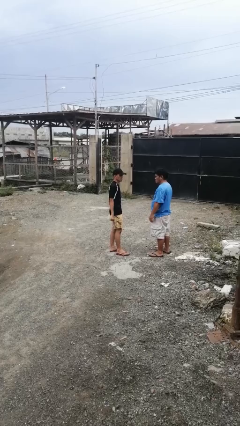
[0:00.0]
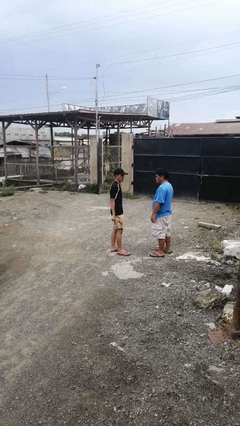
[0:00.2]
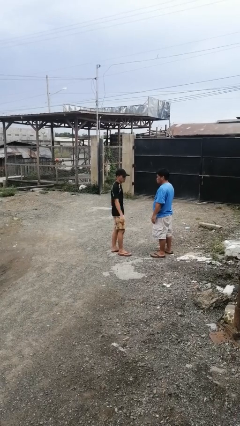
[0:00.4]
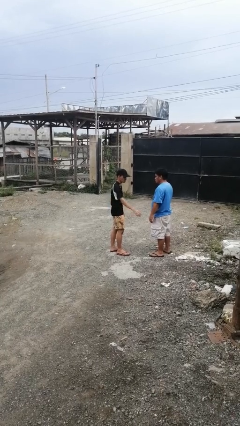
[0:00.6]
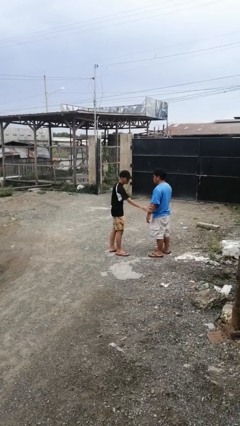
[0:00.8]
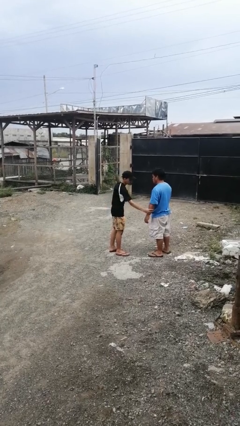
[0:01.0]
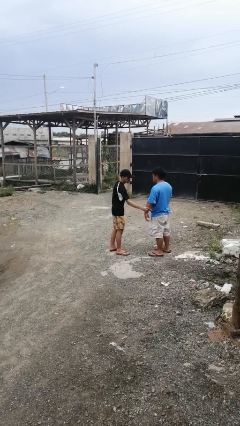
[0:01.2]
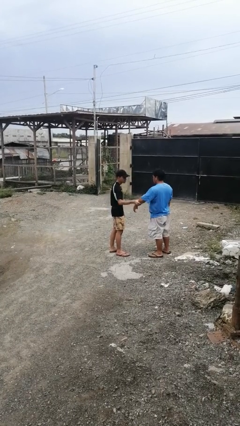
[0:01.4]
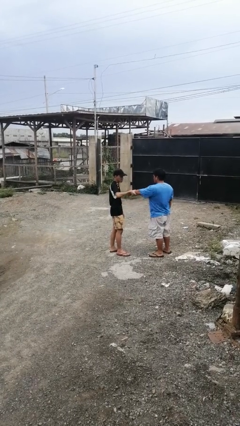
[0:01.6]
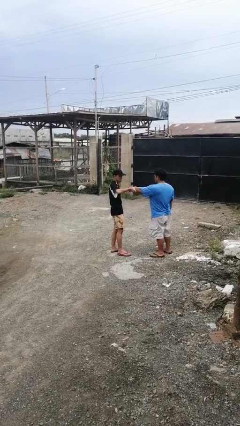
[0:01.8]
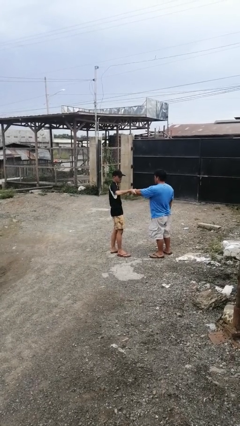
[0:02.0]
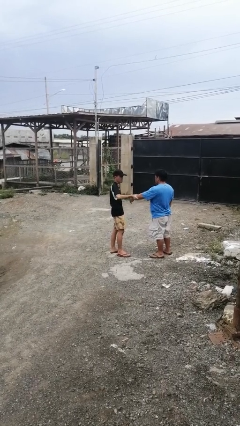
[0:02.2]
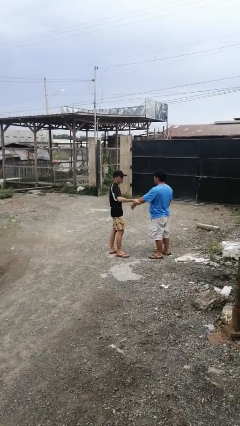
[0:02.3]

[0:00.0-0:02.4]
person grabs person by forearm

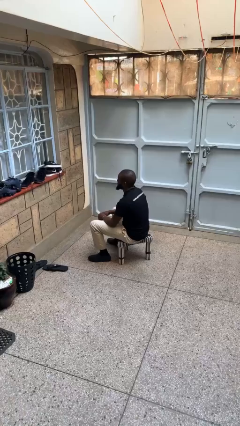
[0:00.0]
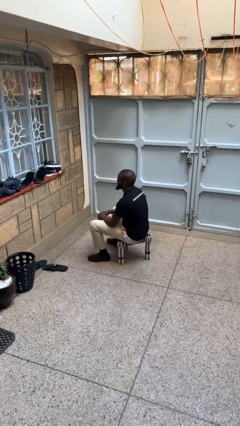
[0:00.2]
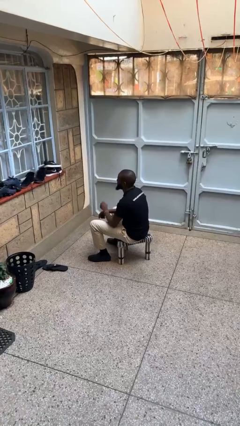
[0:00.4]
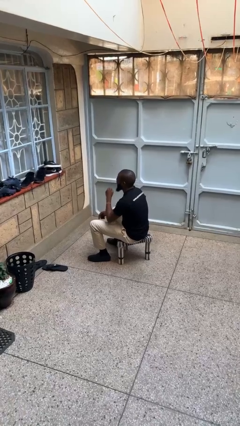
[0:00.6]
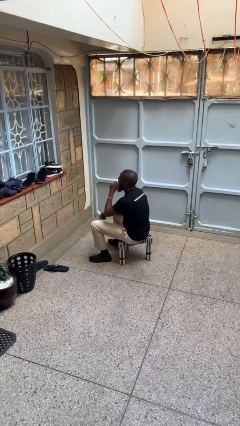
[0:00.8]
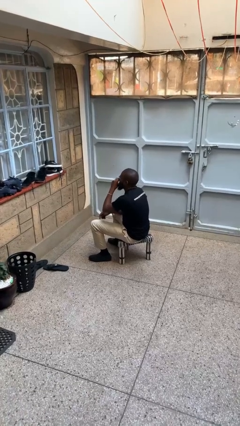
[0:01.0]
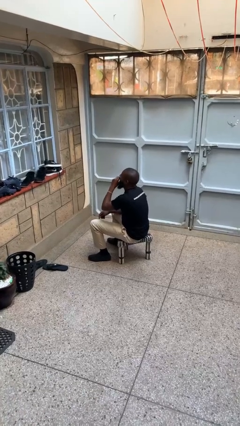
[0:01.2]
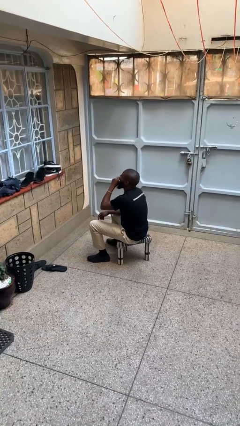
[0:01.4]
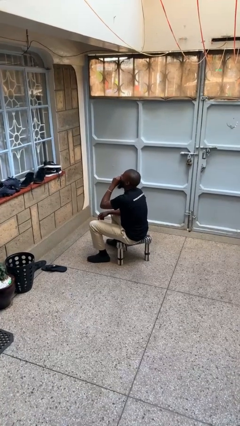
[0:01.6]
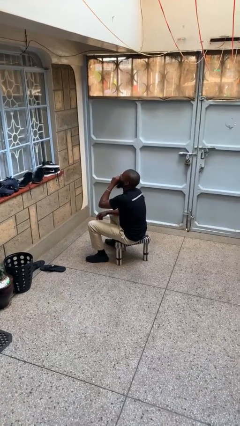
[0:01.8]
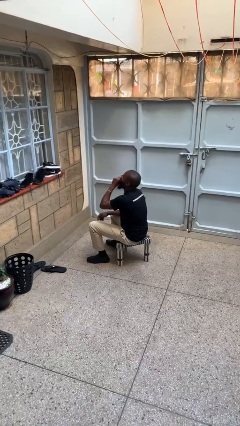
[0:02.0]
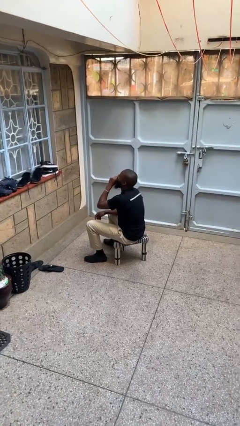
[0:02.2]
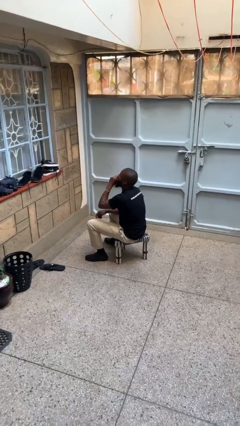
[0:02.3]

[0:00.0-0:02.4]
person yawns

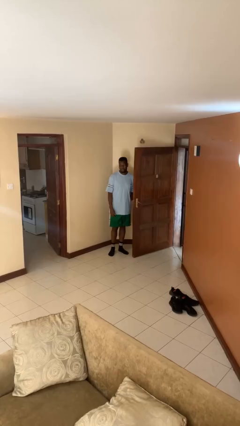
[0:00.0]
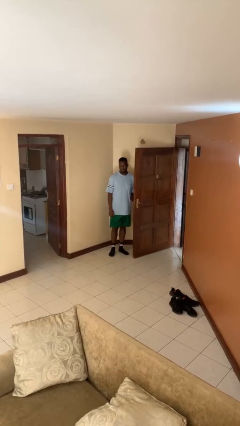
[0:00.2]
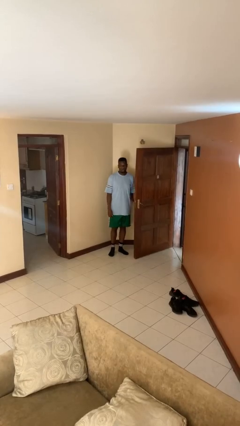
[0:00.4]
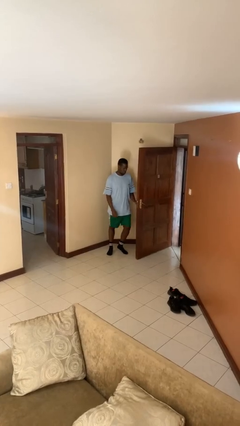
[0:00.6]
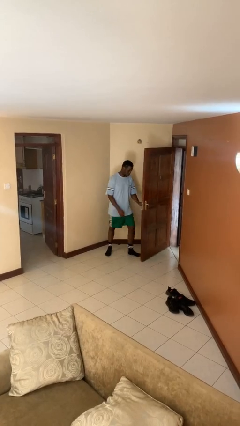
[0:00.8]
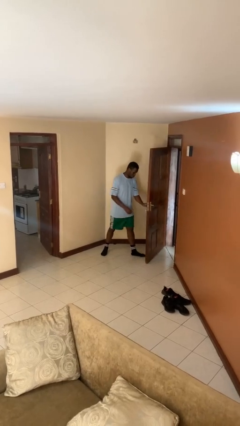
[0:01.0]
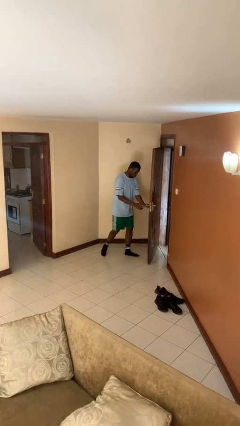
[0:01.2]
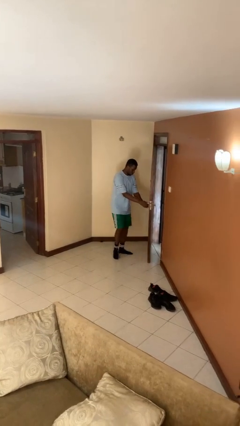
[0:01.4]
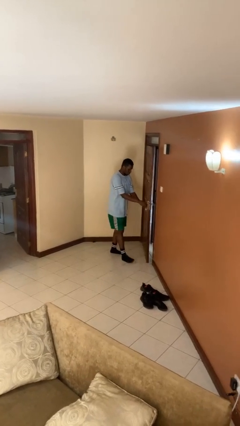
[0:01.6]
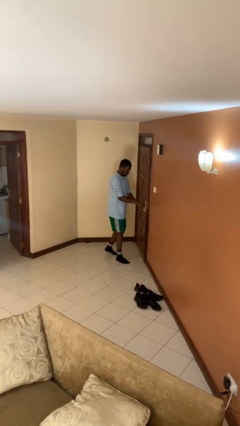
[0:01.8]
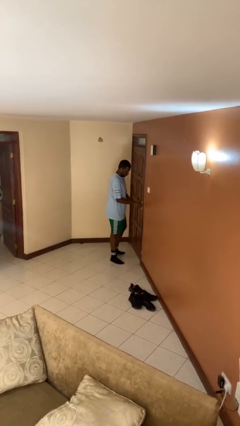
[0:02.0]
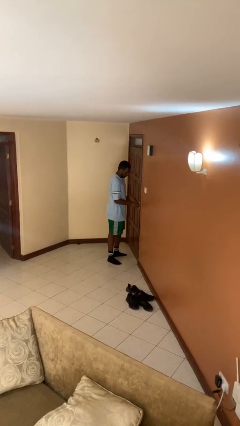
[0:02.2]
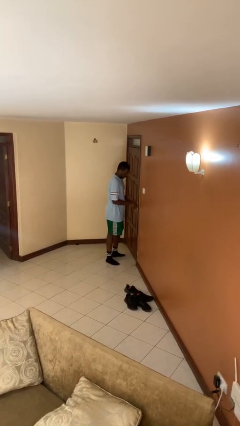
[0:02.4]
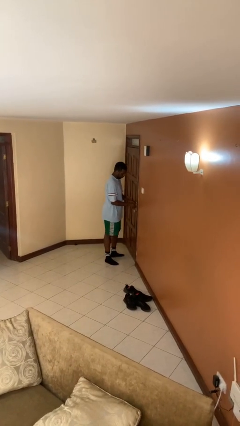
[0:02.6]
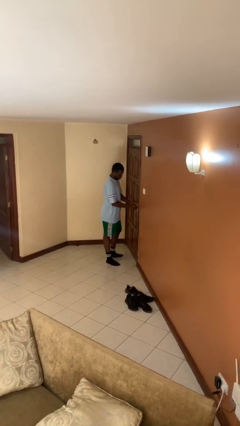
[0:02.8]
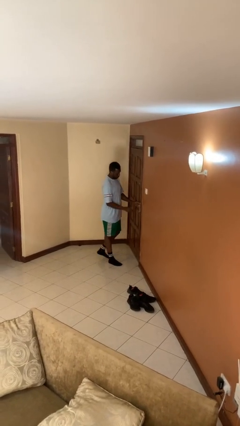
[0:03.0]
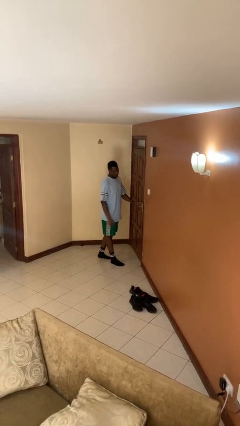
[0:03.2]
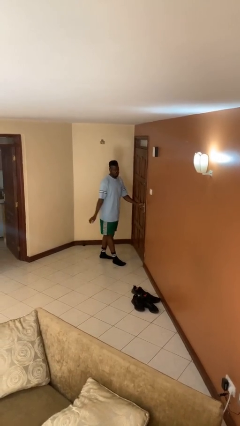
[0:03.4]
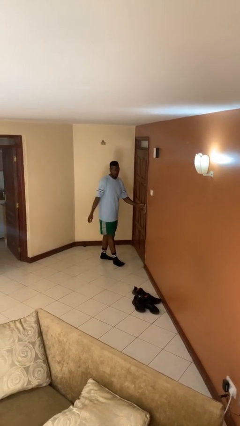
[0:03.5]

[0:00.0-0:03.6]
person closes facility door

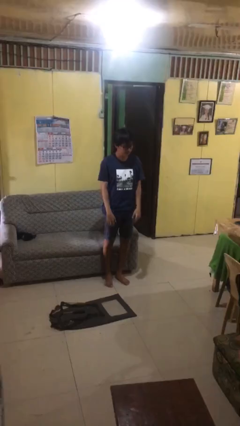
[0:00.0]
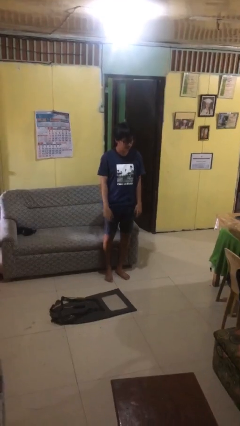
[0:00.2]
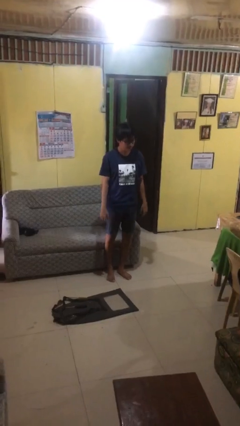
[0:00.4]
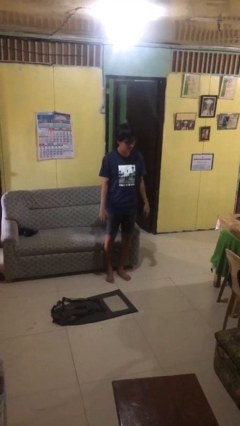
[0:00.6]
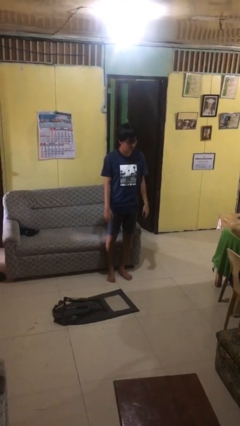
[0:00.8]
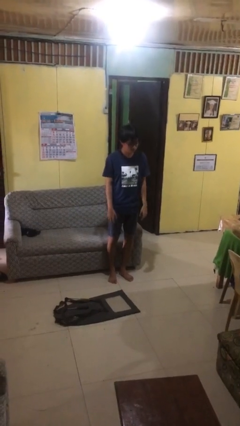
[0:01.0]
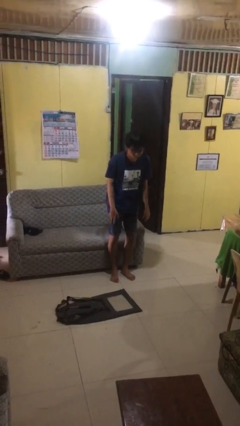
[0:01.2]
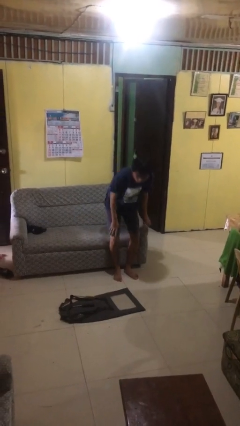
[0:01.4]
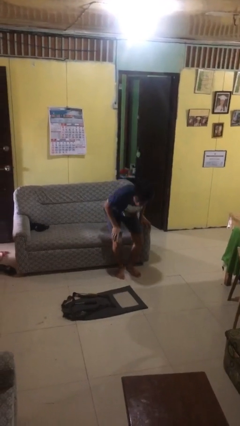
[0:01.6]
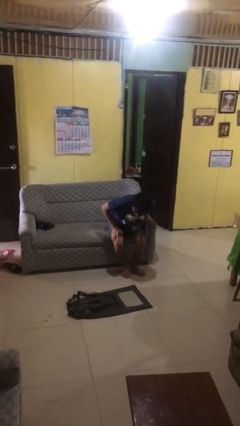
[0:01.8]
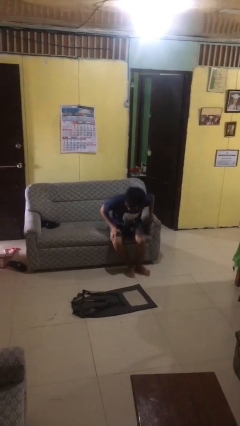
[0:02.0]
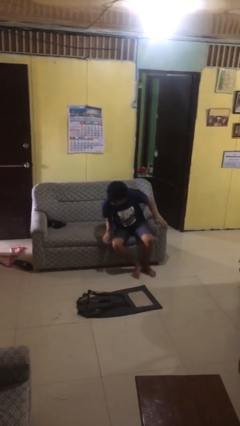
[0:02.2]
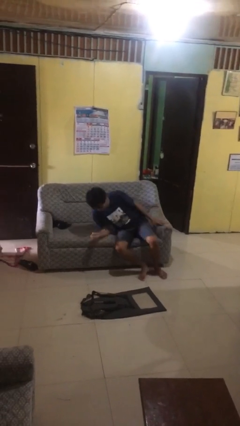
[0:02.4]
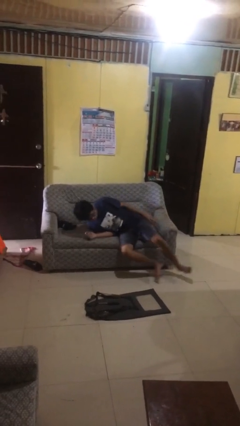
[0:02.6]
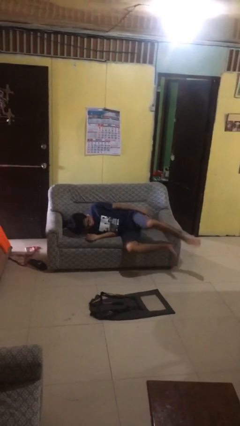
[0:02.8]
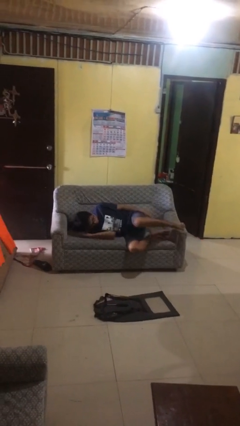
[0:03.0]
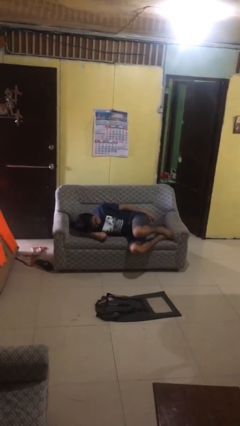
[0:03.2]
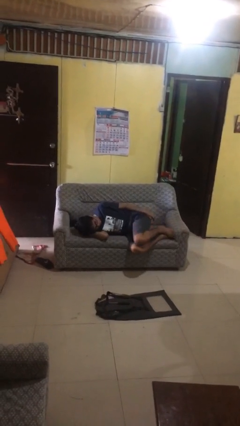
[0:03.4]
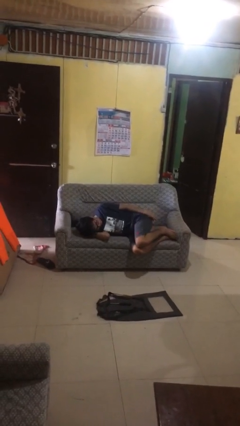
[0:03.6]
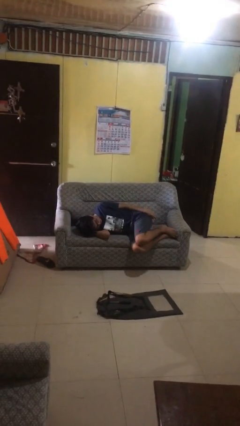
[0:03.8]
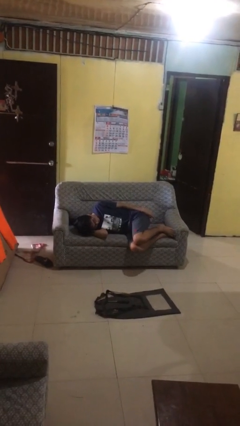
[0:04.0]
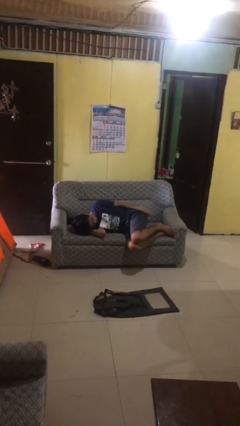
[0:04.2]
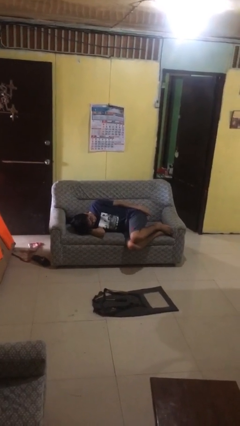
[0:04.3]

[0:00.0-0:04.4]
person lies down on couch

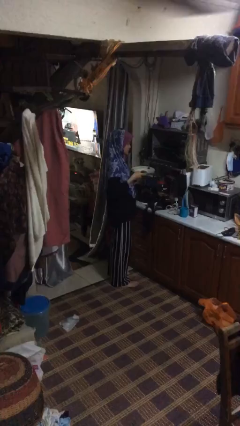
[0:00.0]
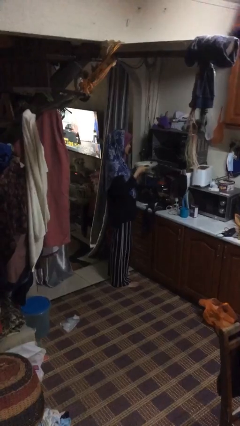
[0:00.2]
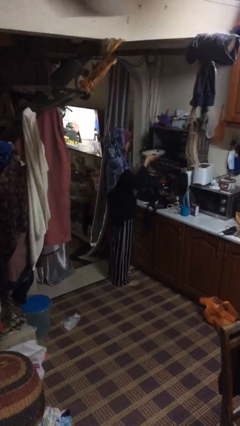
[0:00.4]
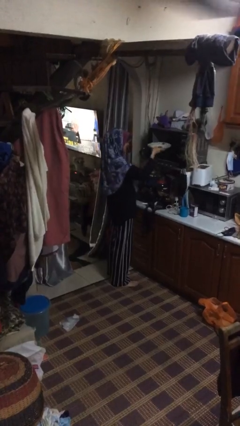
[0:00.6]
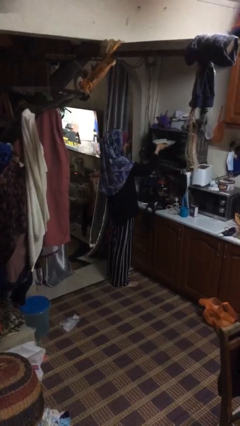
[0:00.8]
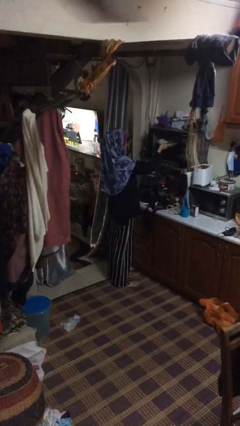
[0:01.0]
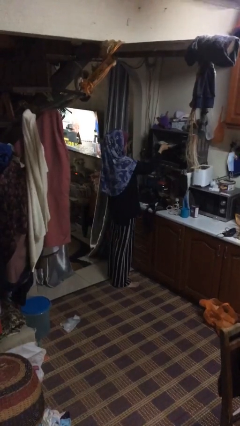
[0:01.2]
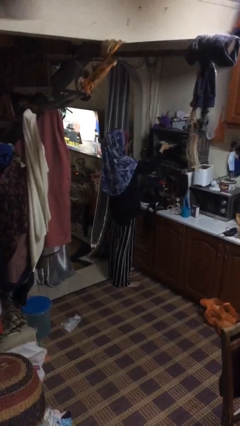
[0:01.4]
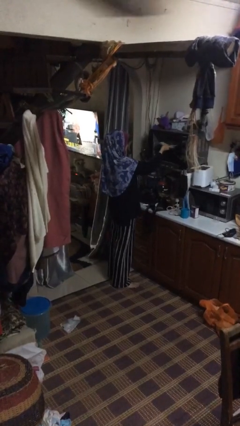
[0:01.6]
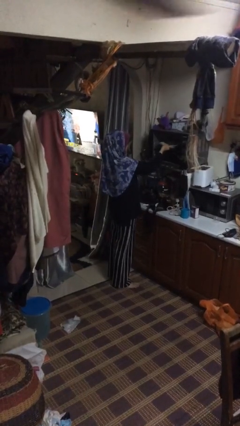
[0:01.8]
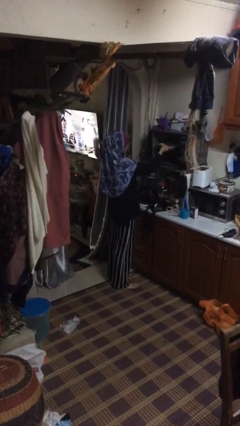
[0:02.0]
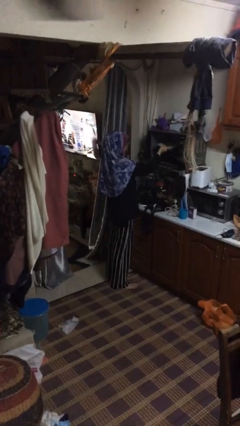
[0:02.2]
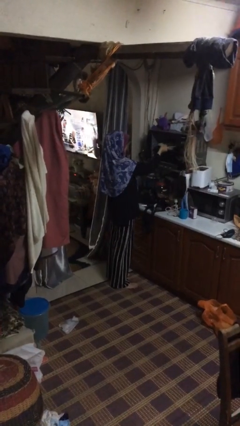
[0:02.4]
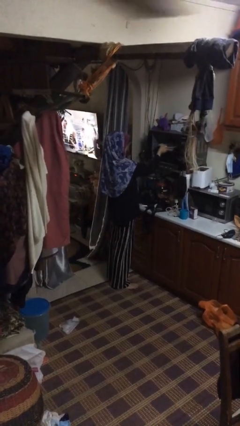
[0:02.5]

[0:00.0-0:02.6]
person puts object into oven

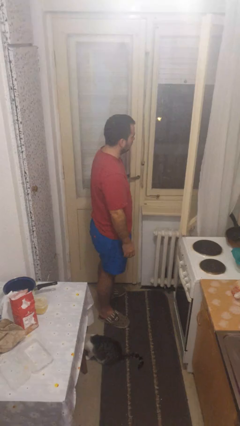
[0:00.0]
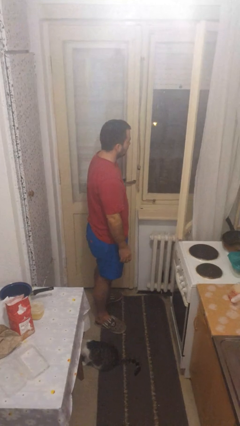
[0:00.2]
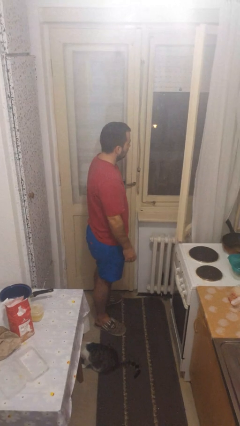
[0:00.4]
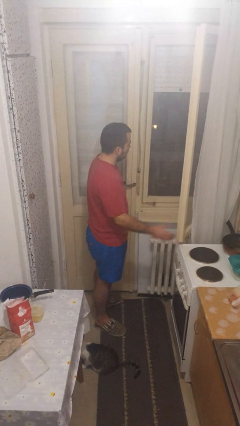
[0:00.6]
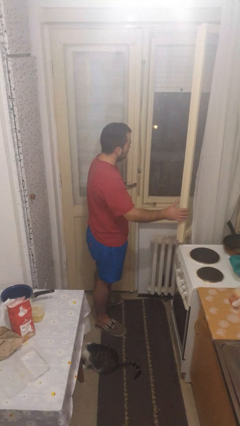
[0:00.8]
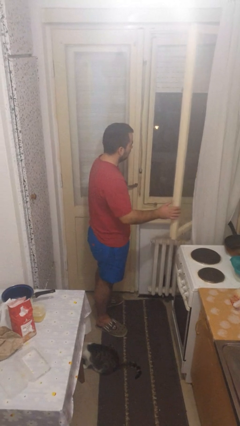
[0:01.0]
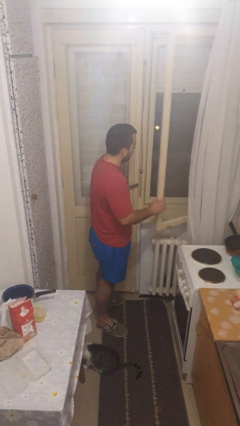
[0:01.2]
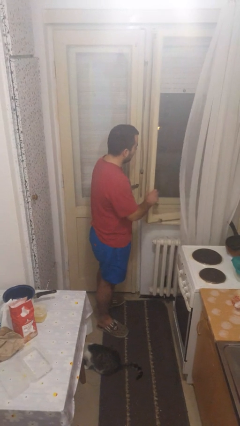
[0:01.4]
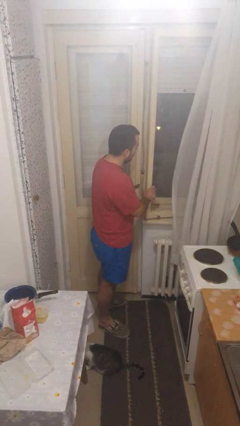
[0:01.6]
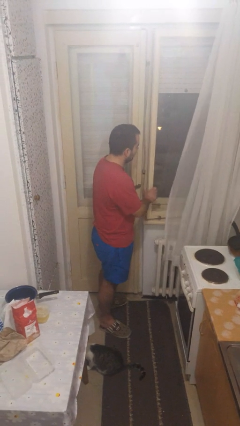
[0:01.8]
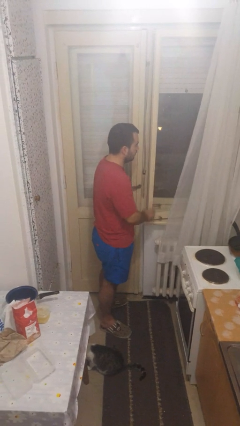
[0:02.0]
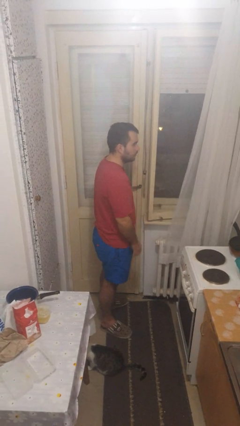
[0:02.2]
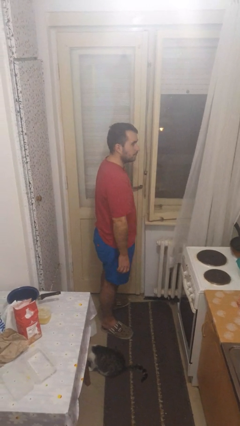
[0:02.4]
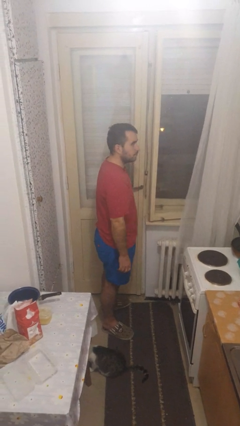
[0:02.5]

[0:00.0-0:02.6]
person closes home window
